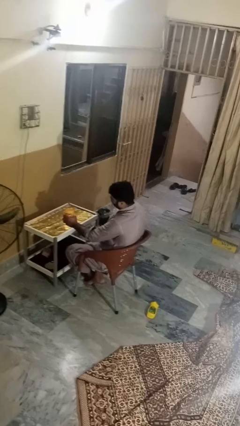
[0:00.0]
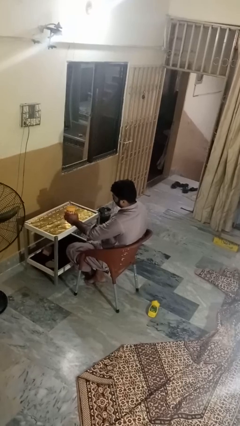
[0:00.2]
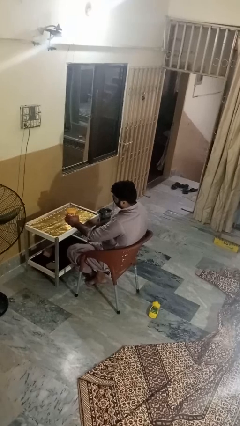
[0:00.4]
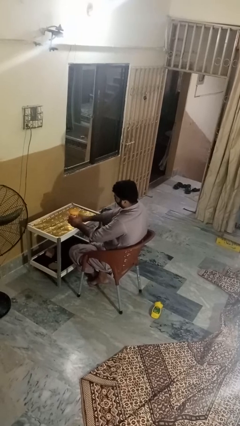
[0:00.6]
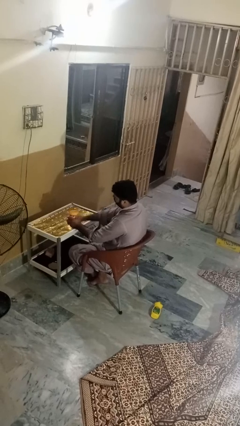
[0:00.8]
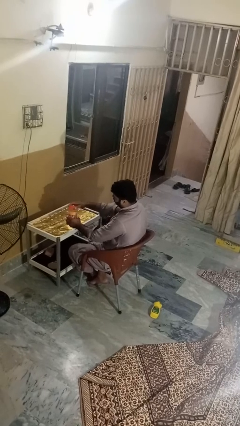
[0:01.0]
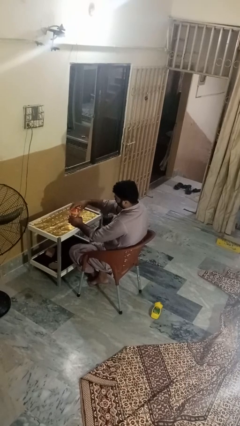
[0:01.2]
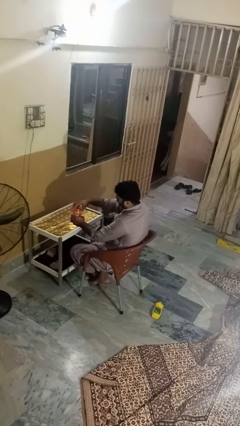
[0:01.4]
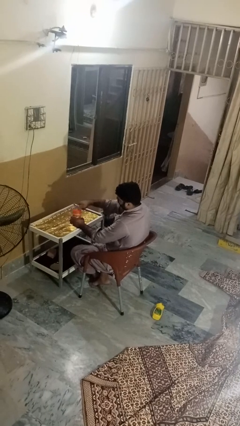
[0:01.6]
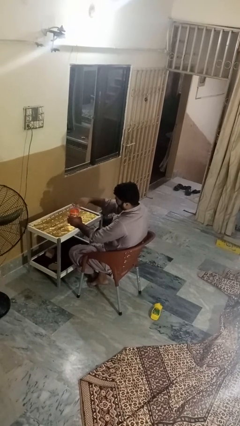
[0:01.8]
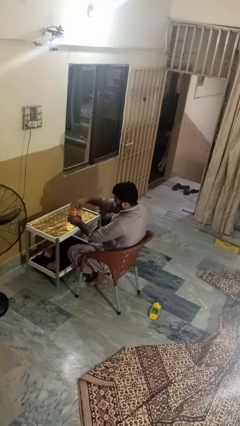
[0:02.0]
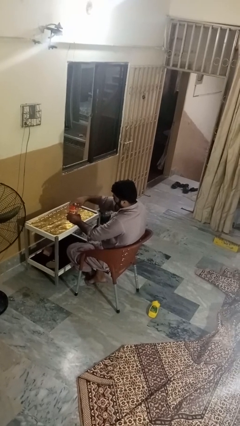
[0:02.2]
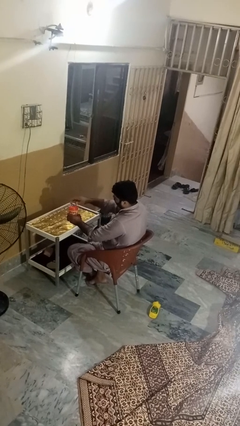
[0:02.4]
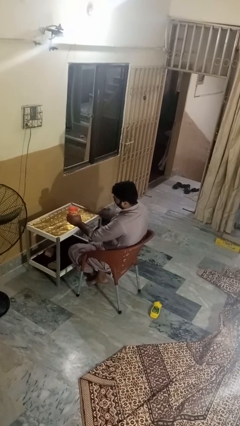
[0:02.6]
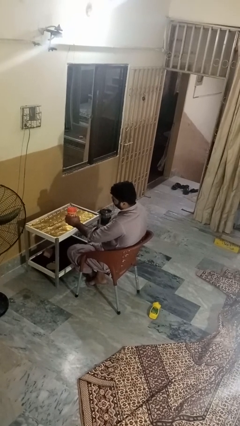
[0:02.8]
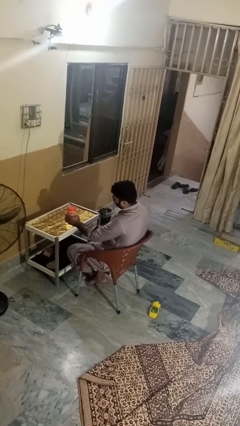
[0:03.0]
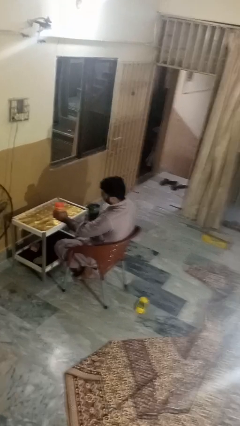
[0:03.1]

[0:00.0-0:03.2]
person closes jar

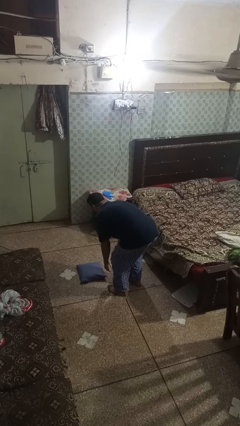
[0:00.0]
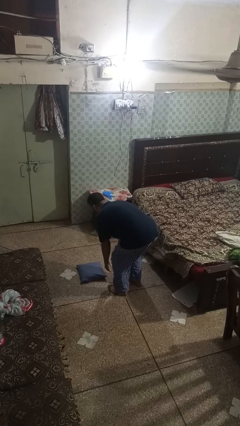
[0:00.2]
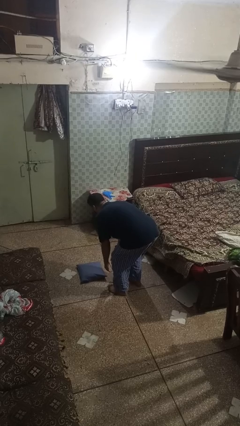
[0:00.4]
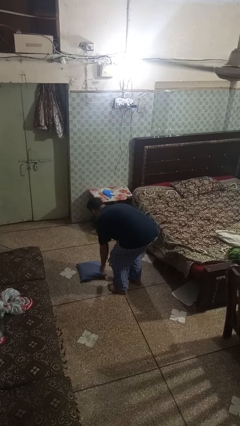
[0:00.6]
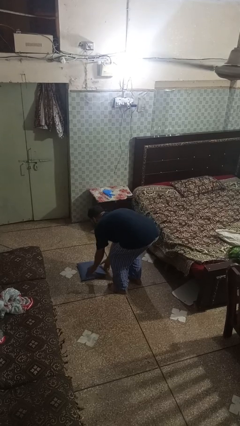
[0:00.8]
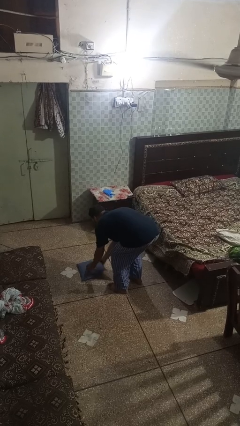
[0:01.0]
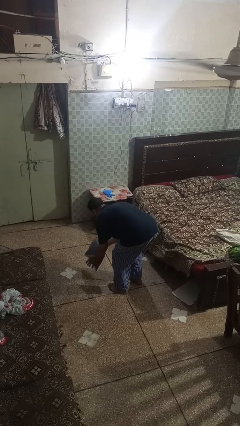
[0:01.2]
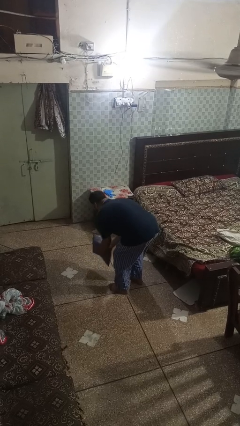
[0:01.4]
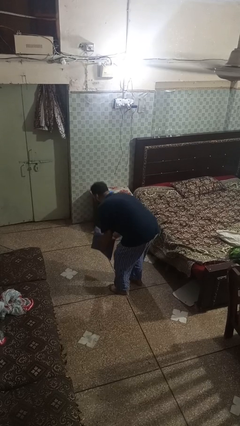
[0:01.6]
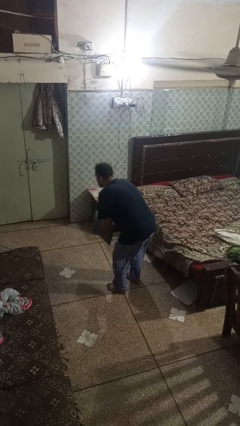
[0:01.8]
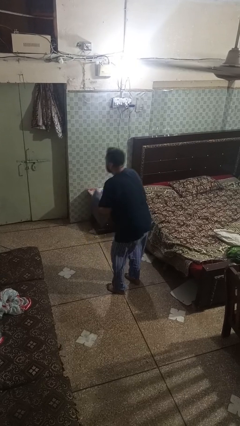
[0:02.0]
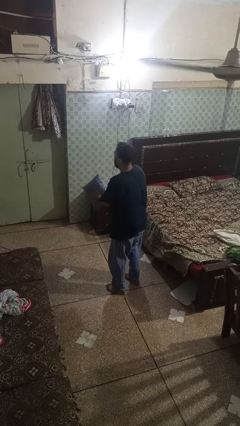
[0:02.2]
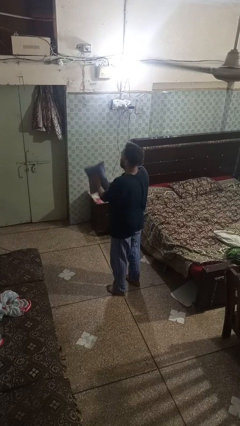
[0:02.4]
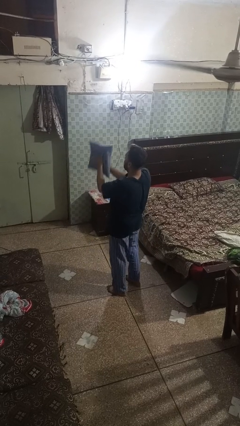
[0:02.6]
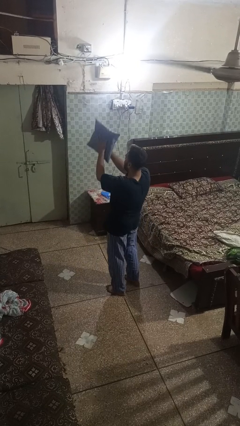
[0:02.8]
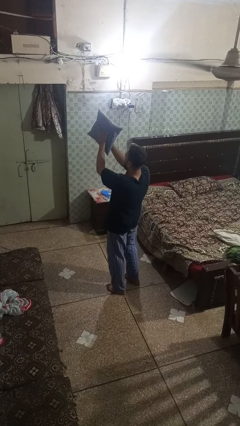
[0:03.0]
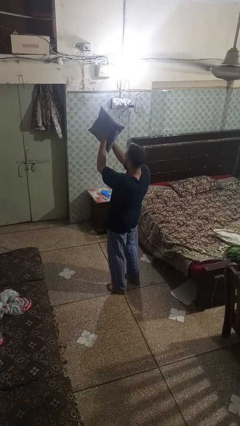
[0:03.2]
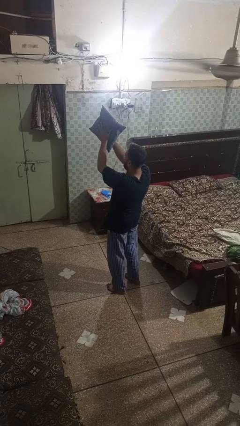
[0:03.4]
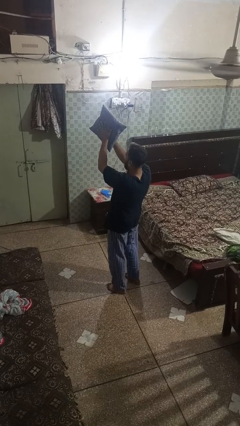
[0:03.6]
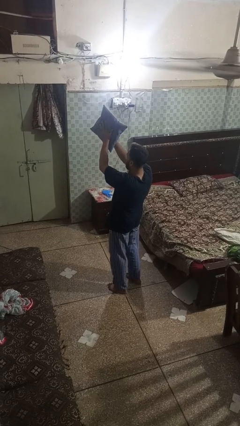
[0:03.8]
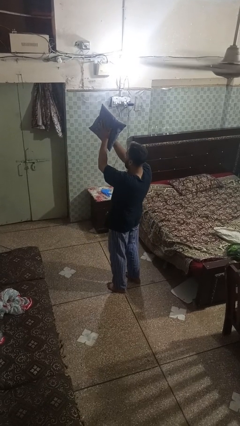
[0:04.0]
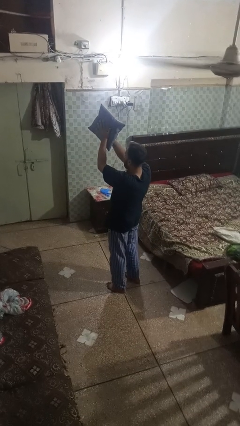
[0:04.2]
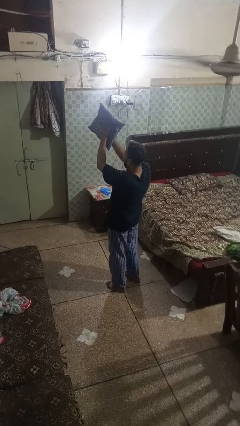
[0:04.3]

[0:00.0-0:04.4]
person picks up object from floor

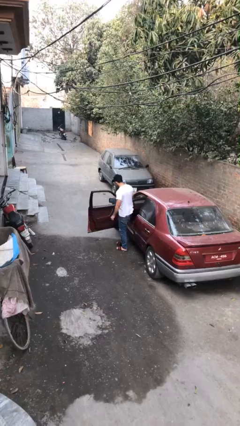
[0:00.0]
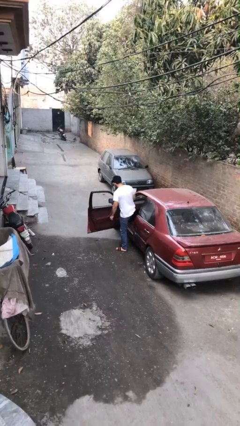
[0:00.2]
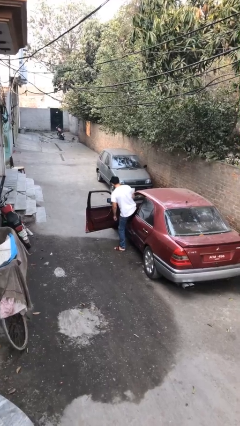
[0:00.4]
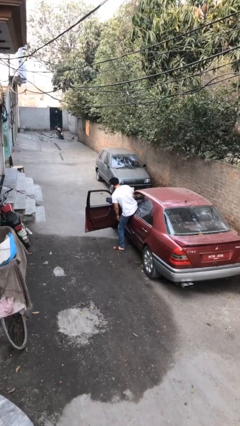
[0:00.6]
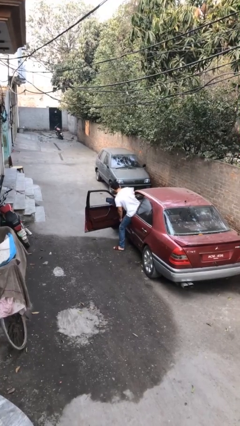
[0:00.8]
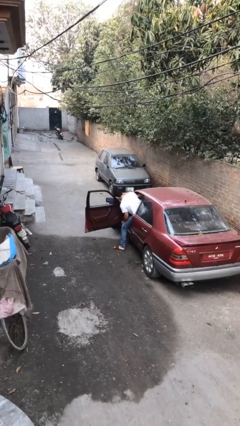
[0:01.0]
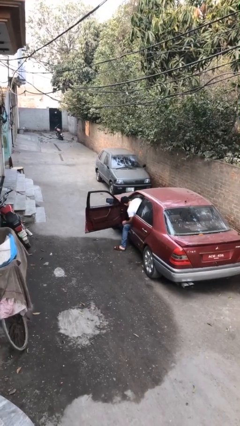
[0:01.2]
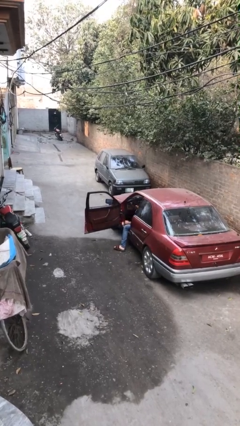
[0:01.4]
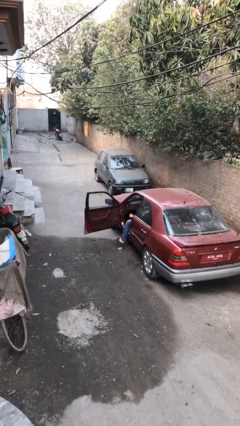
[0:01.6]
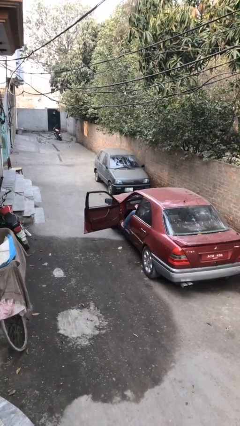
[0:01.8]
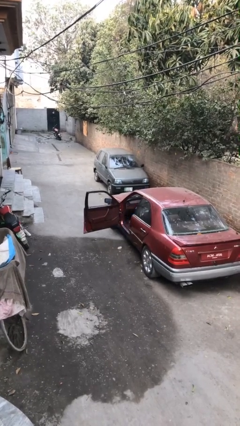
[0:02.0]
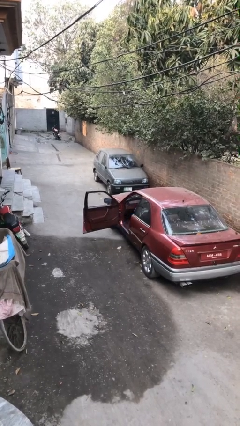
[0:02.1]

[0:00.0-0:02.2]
person enters car

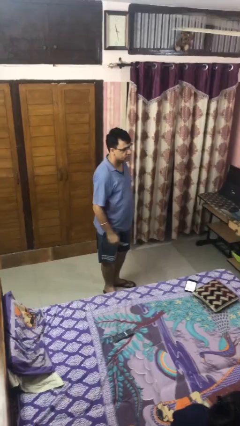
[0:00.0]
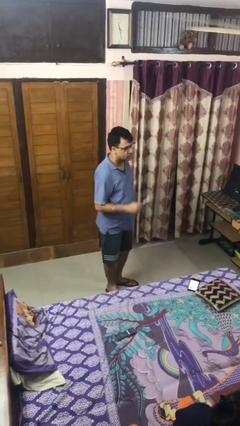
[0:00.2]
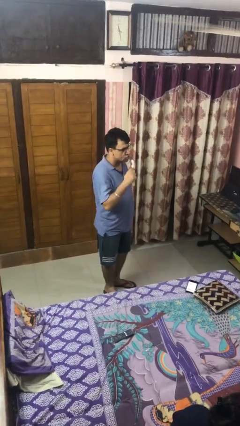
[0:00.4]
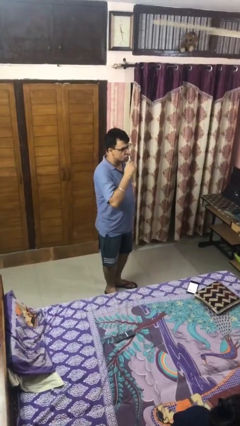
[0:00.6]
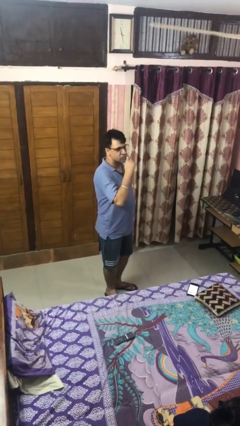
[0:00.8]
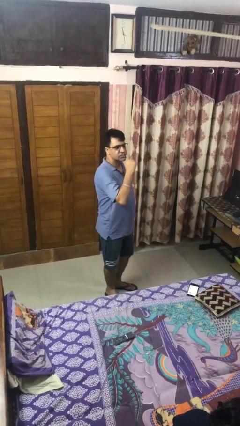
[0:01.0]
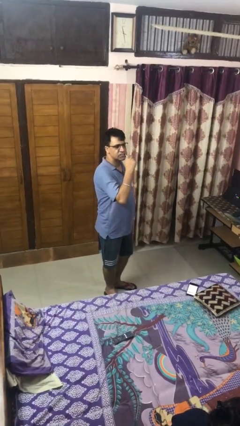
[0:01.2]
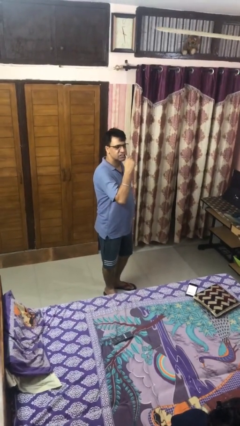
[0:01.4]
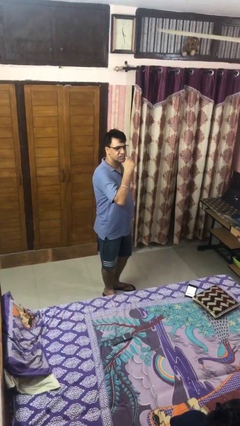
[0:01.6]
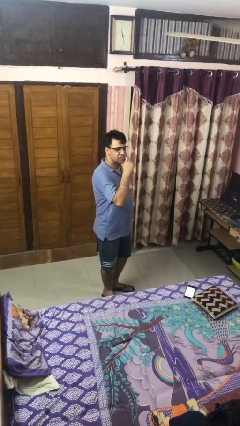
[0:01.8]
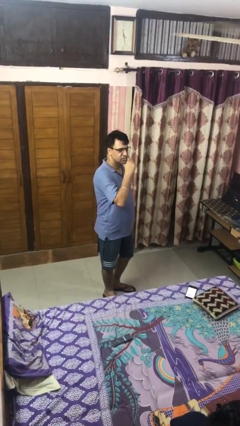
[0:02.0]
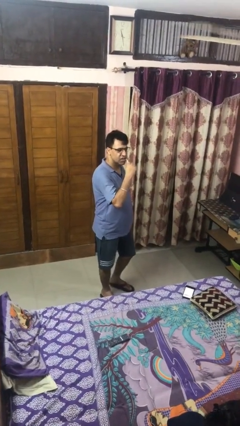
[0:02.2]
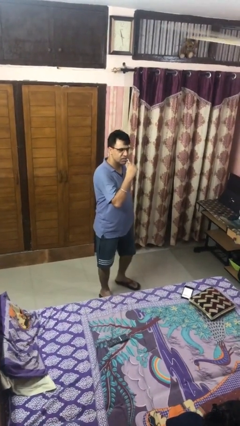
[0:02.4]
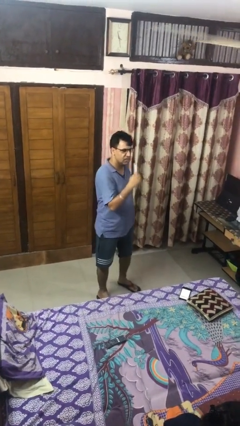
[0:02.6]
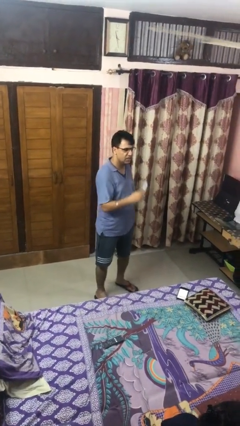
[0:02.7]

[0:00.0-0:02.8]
person brushes teeth

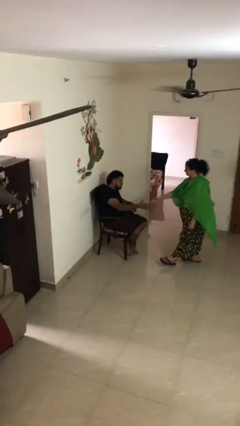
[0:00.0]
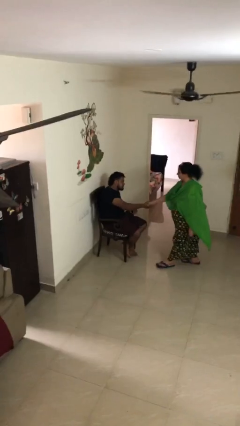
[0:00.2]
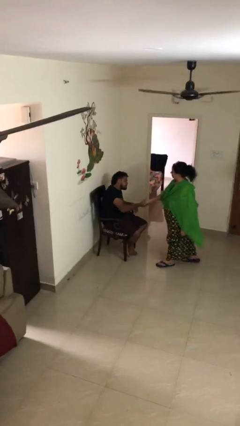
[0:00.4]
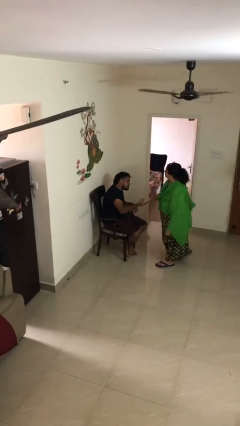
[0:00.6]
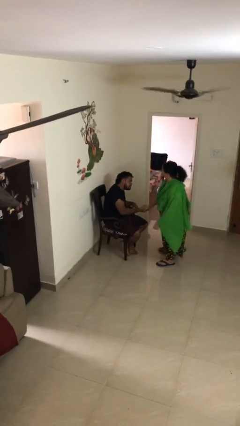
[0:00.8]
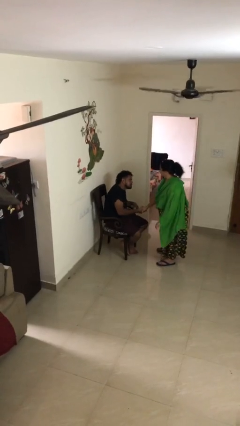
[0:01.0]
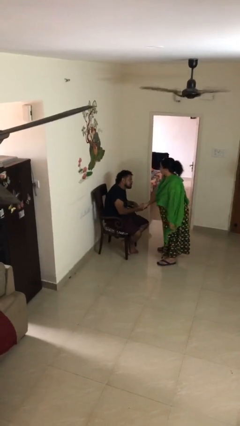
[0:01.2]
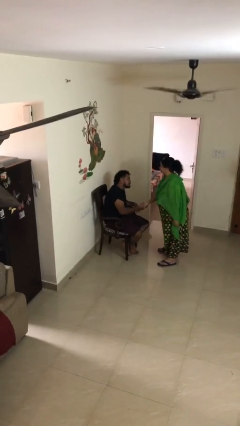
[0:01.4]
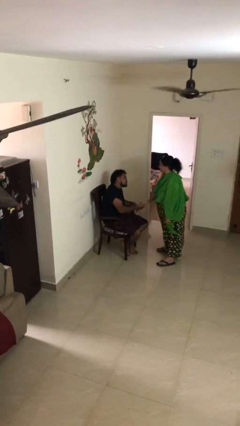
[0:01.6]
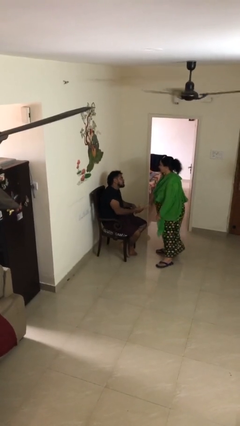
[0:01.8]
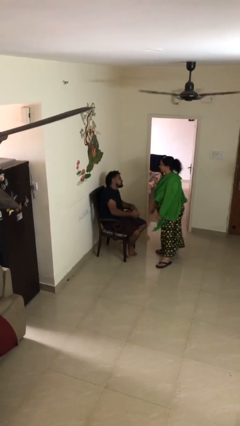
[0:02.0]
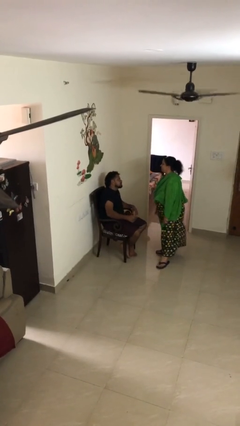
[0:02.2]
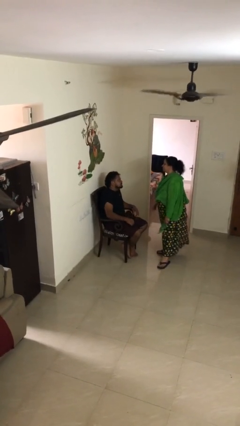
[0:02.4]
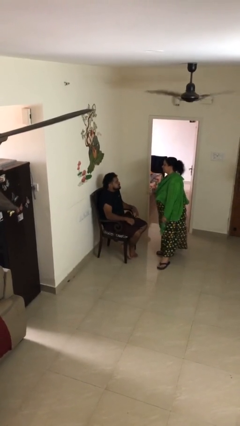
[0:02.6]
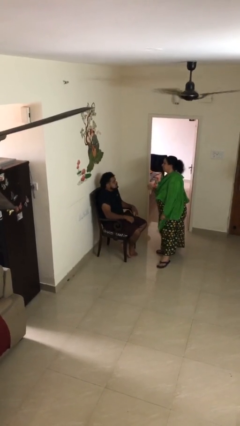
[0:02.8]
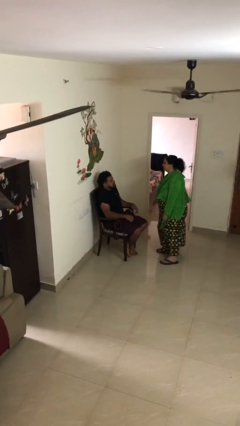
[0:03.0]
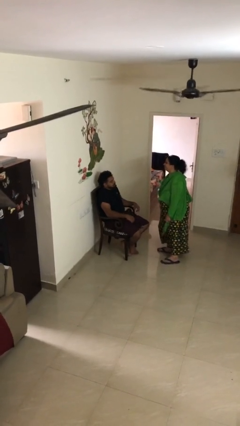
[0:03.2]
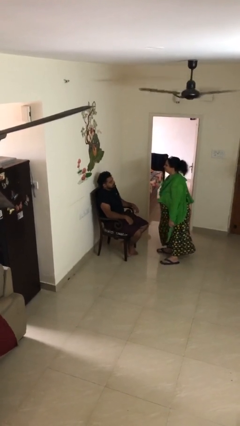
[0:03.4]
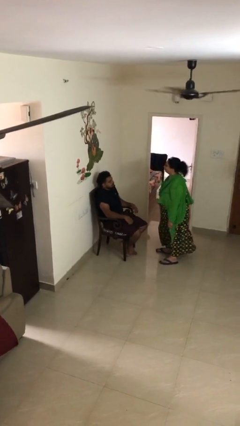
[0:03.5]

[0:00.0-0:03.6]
person shakes hand

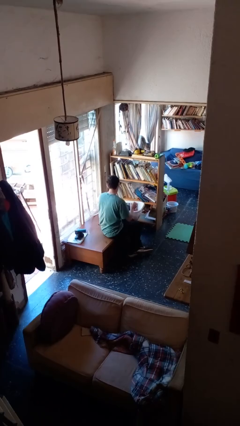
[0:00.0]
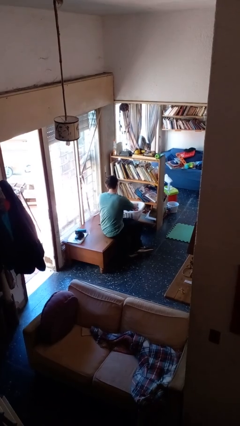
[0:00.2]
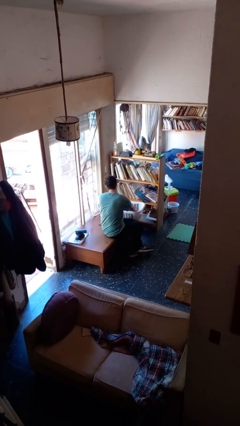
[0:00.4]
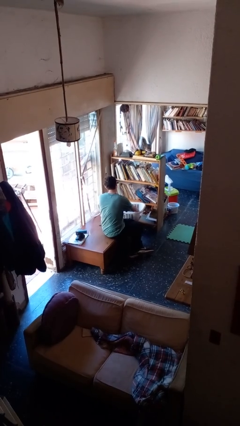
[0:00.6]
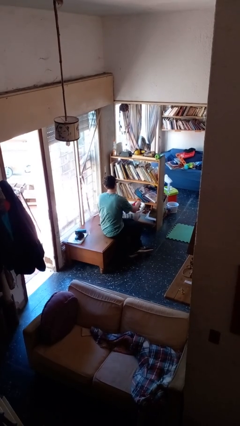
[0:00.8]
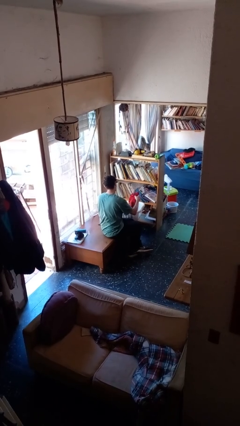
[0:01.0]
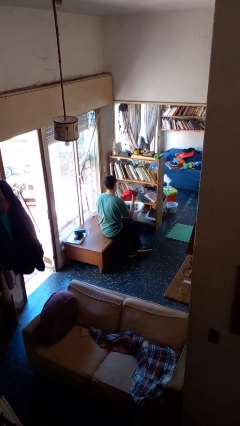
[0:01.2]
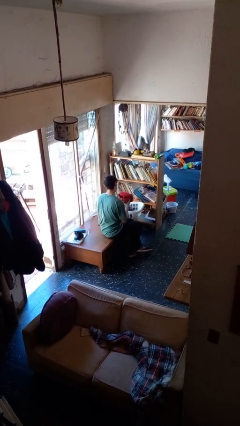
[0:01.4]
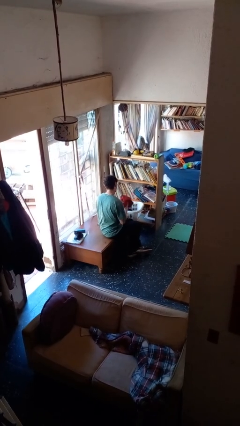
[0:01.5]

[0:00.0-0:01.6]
person takes object from basket
